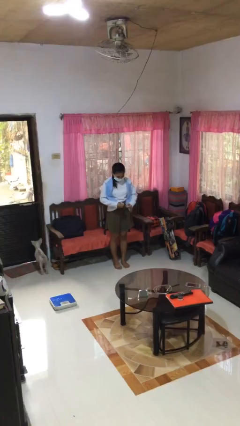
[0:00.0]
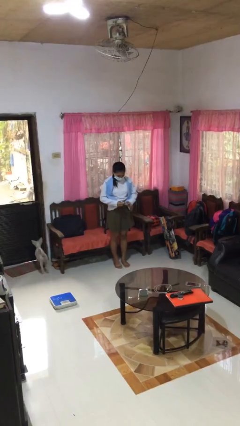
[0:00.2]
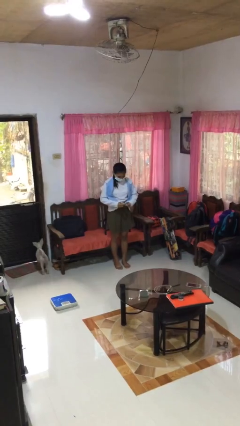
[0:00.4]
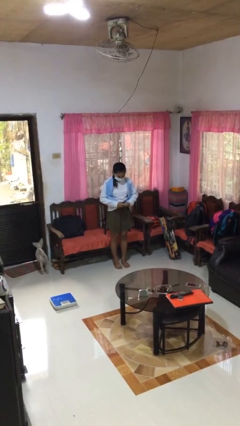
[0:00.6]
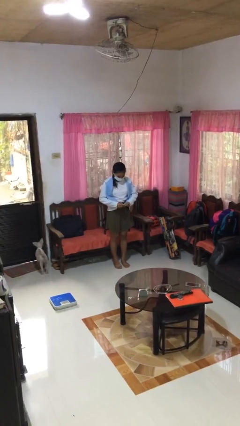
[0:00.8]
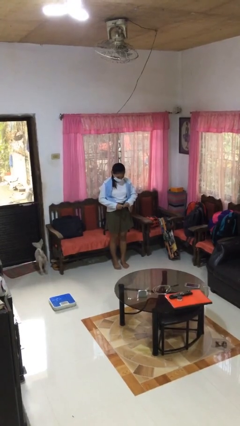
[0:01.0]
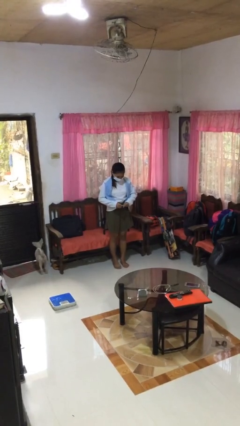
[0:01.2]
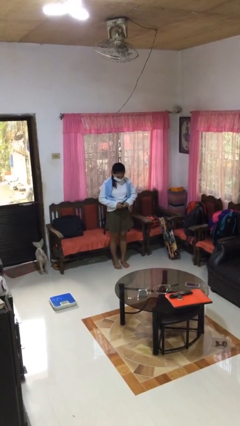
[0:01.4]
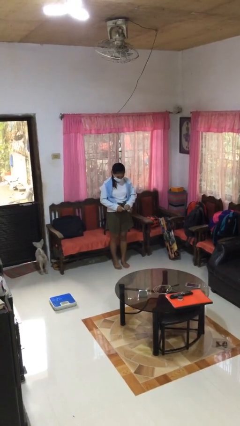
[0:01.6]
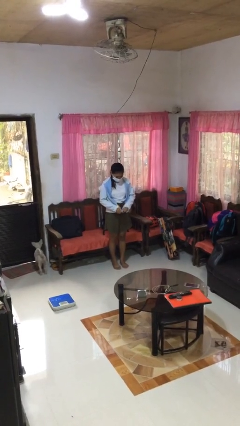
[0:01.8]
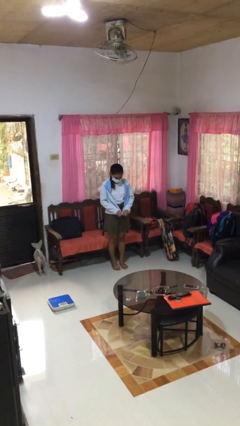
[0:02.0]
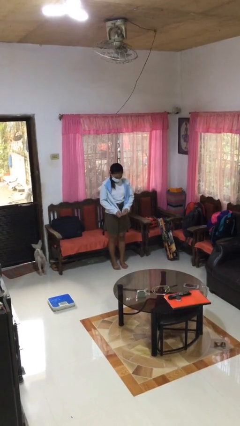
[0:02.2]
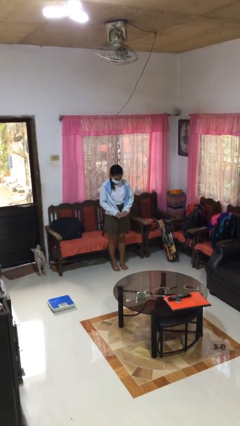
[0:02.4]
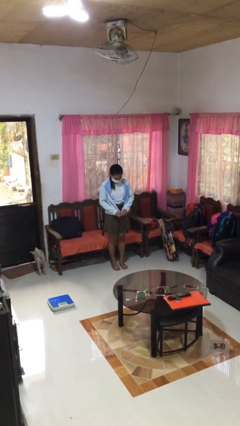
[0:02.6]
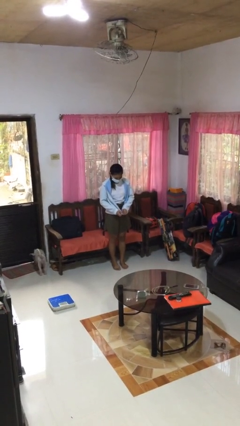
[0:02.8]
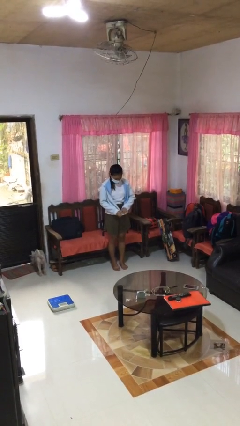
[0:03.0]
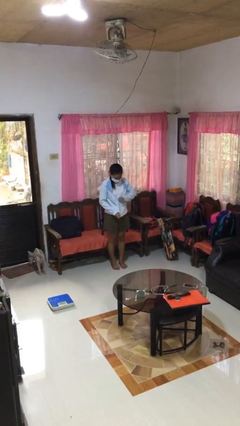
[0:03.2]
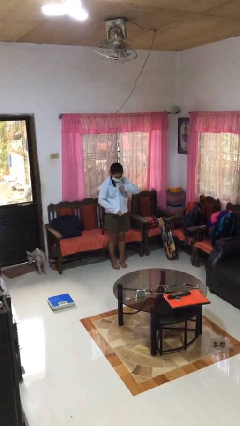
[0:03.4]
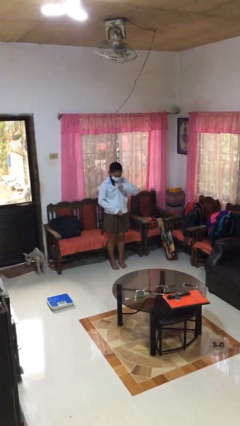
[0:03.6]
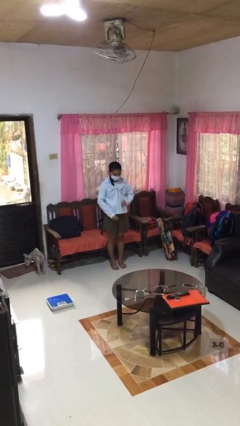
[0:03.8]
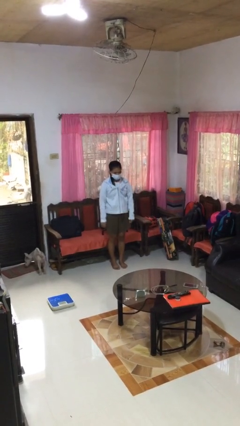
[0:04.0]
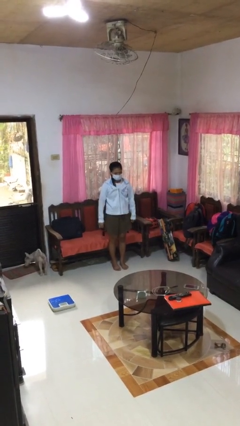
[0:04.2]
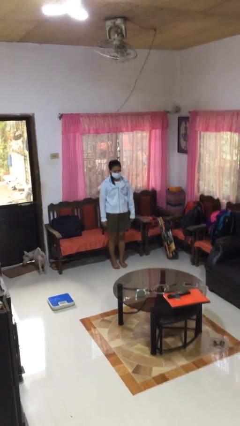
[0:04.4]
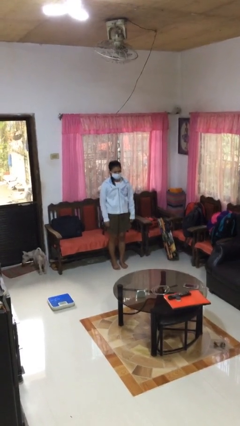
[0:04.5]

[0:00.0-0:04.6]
person zips up jacket

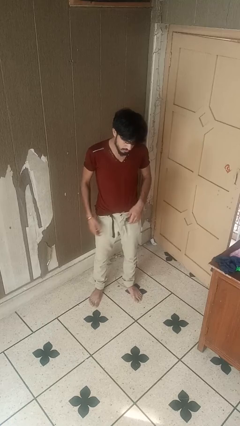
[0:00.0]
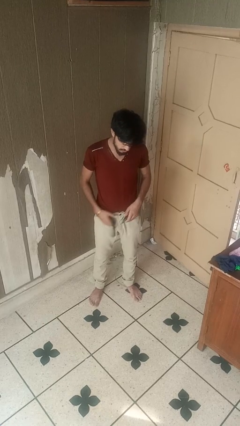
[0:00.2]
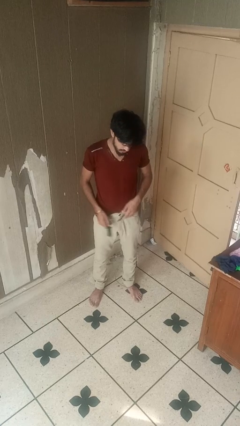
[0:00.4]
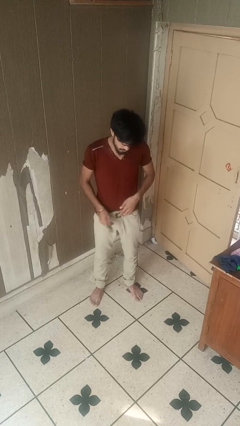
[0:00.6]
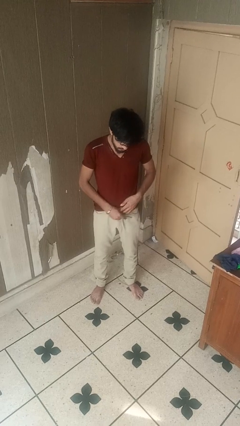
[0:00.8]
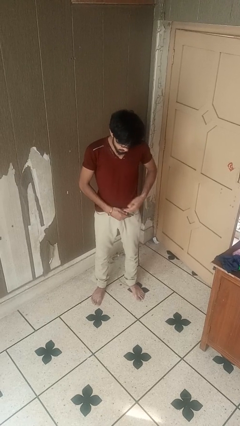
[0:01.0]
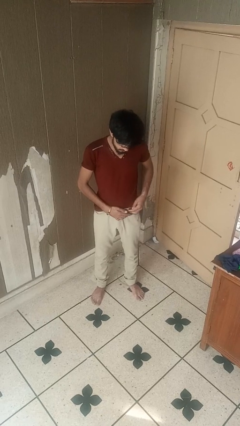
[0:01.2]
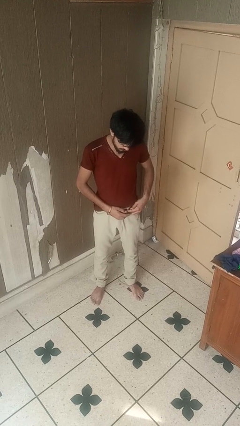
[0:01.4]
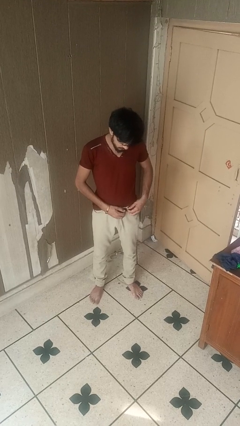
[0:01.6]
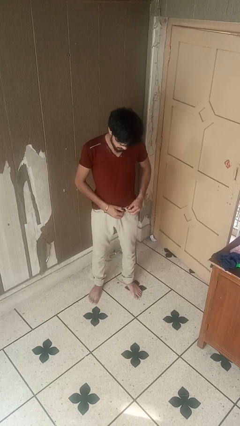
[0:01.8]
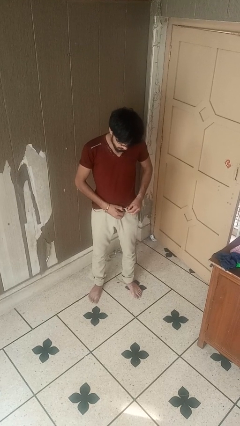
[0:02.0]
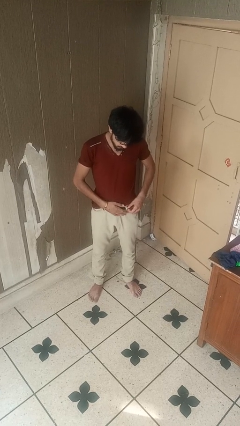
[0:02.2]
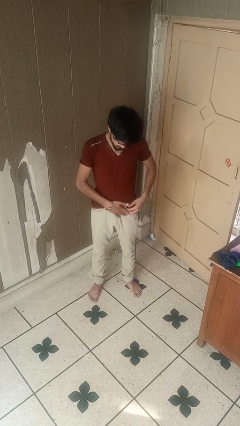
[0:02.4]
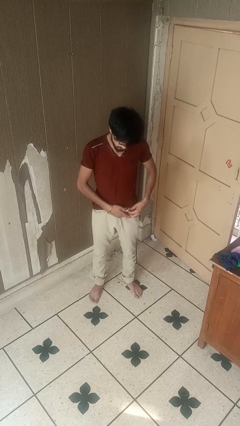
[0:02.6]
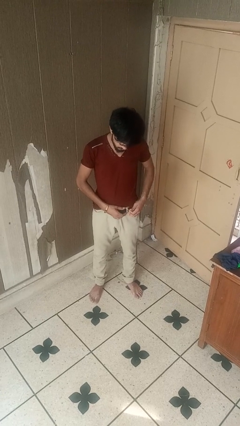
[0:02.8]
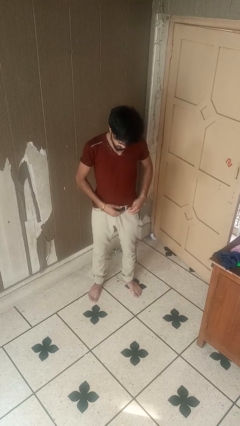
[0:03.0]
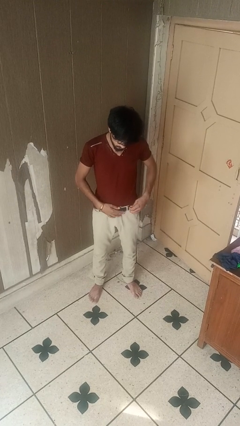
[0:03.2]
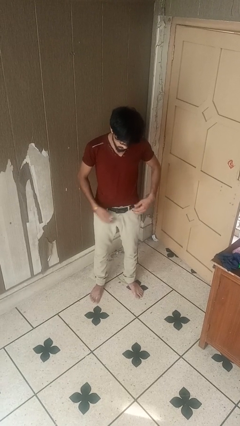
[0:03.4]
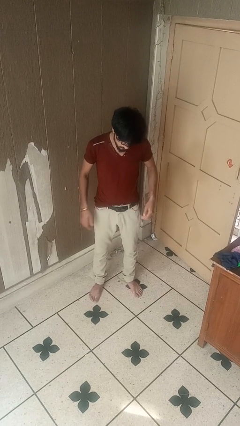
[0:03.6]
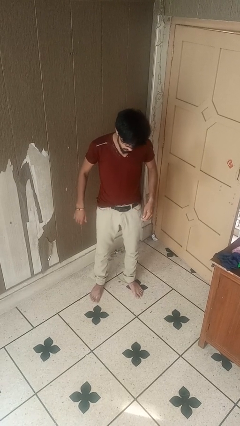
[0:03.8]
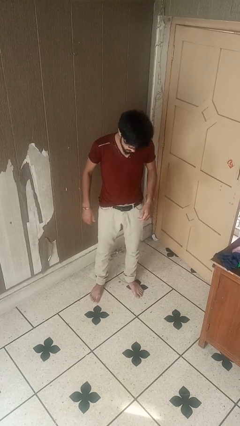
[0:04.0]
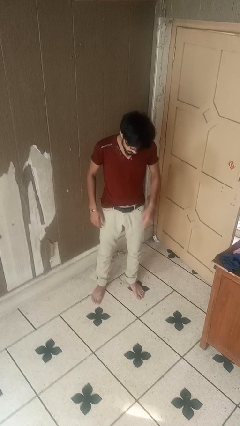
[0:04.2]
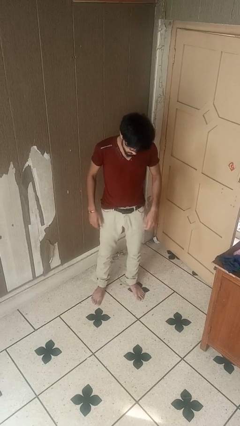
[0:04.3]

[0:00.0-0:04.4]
person puts on belt

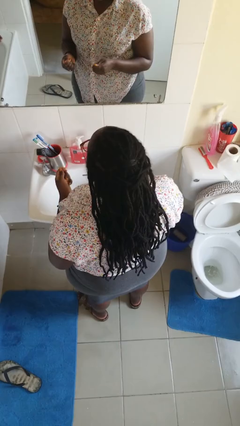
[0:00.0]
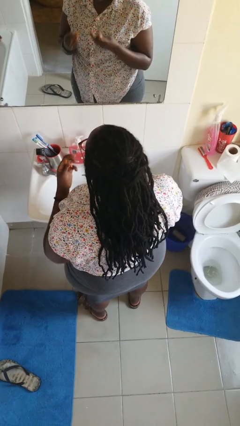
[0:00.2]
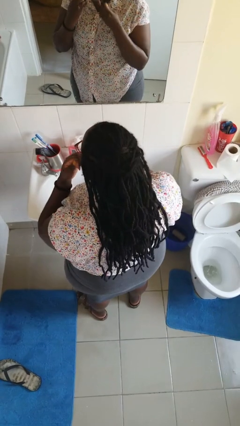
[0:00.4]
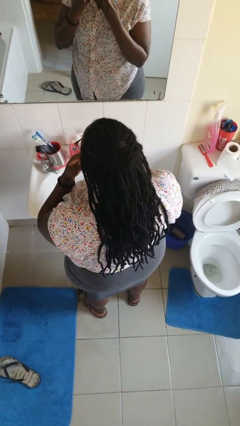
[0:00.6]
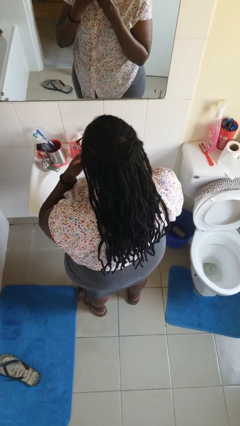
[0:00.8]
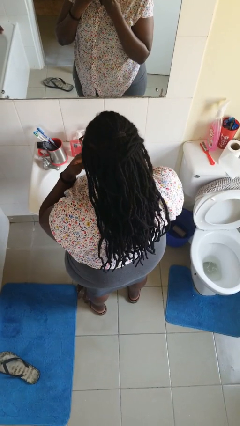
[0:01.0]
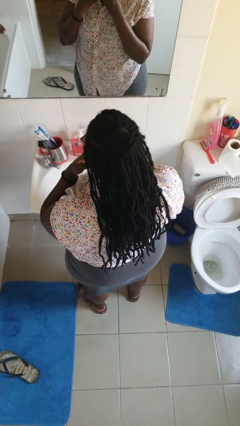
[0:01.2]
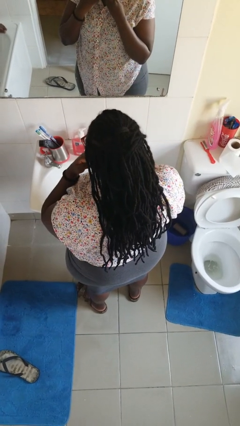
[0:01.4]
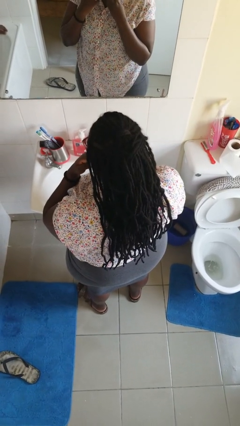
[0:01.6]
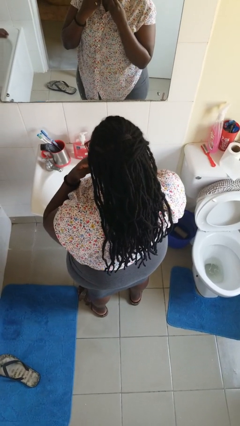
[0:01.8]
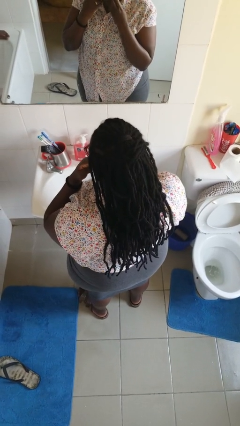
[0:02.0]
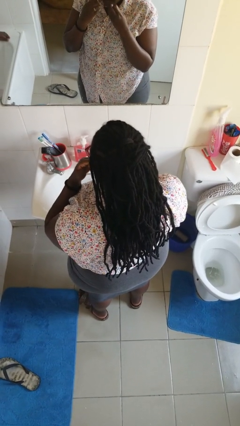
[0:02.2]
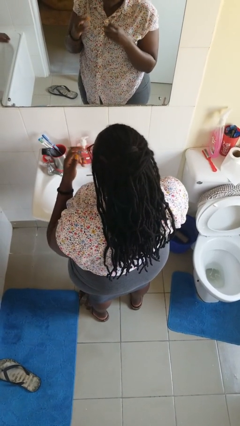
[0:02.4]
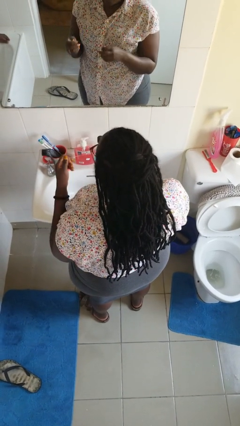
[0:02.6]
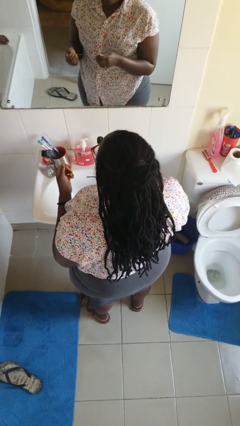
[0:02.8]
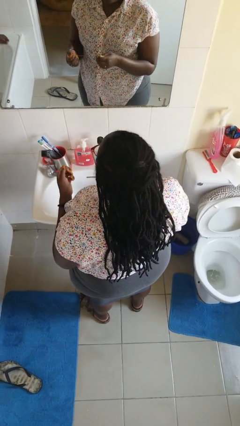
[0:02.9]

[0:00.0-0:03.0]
person flosses

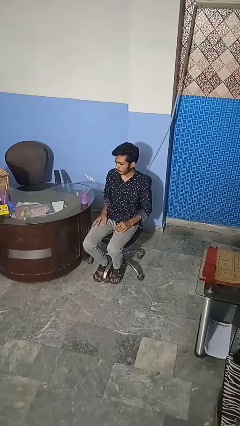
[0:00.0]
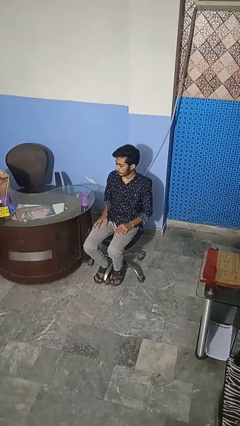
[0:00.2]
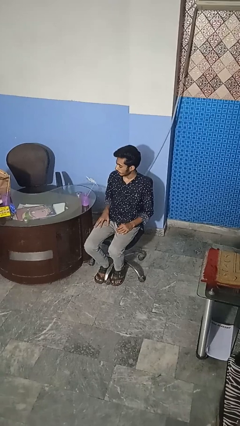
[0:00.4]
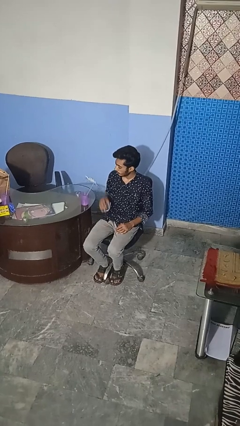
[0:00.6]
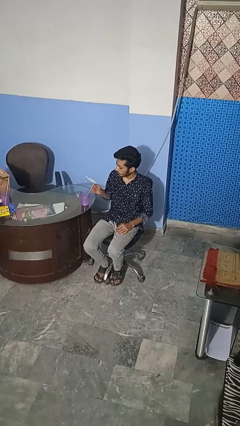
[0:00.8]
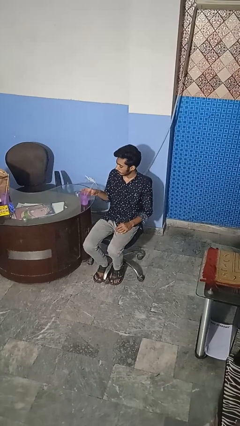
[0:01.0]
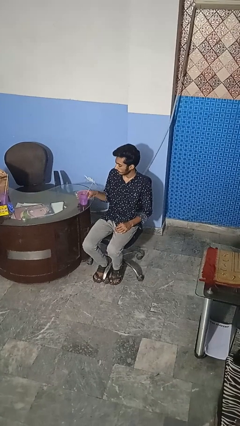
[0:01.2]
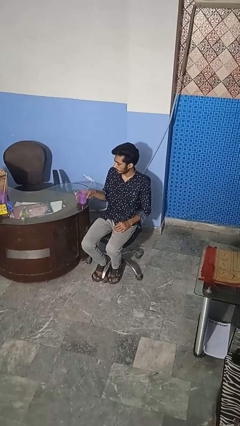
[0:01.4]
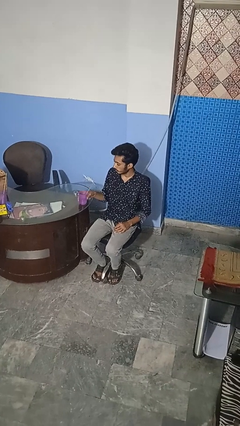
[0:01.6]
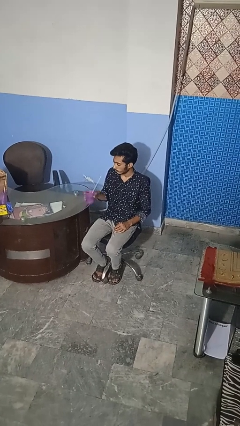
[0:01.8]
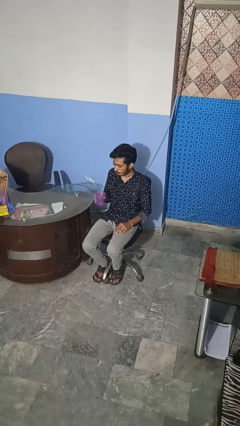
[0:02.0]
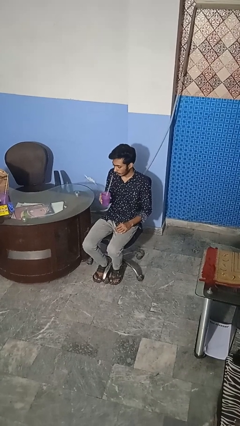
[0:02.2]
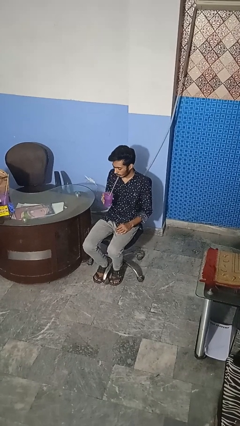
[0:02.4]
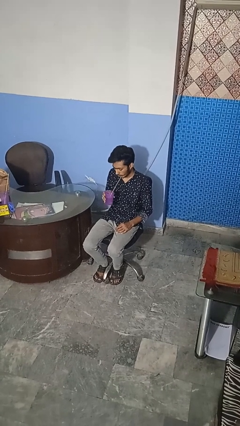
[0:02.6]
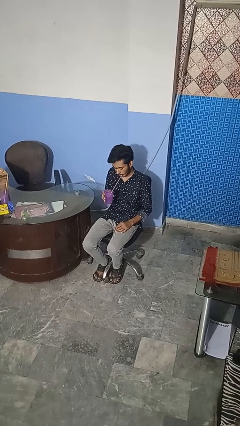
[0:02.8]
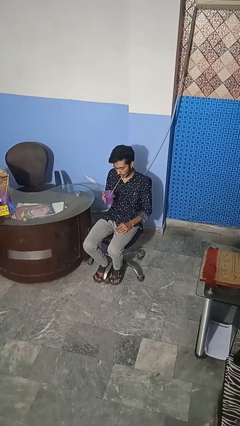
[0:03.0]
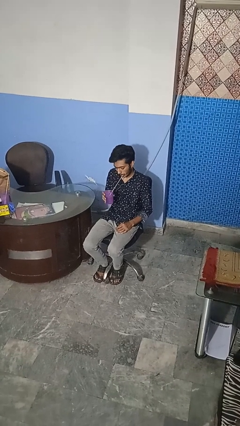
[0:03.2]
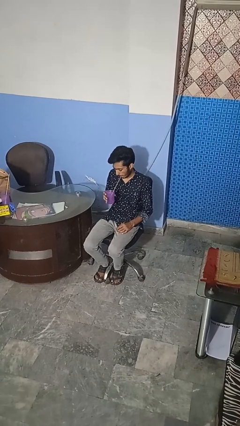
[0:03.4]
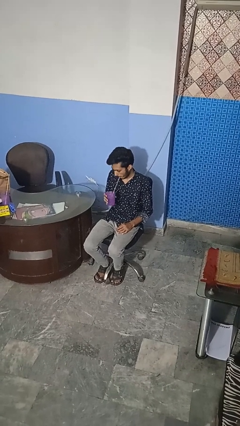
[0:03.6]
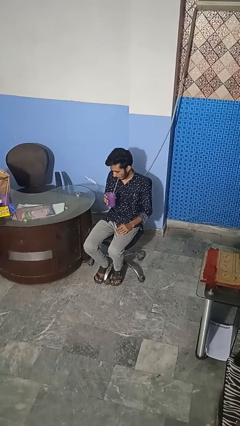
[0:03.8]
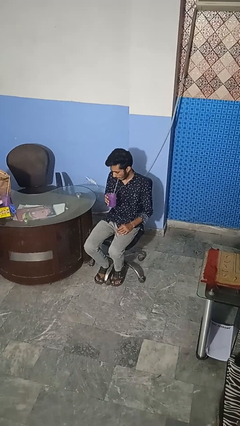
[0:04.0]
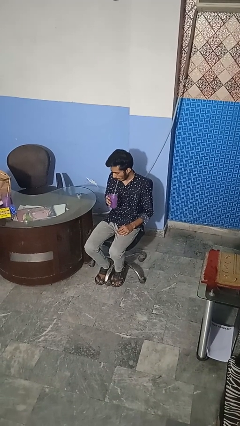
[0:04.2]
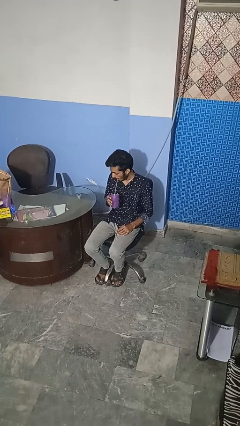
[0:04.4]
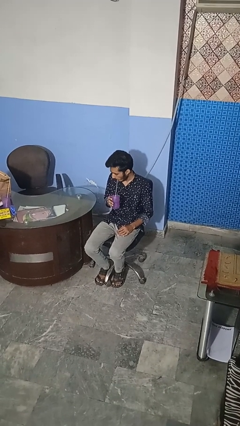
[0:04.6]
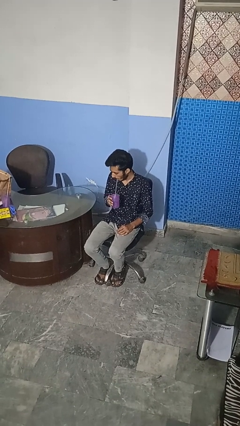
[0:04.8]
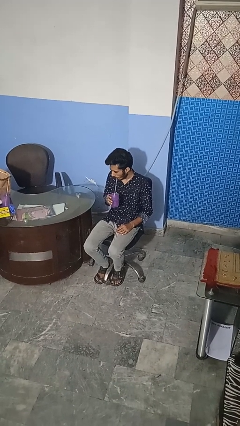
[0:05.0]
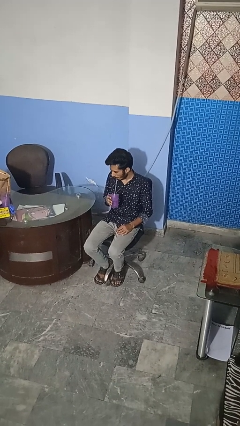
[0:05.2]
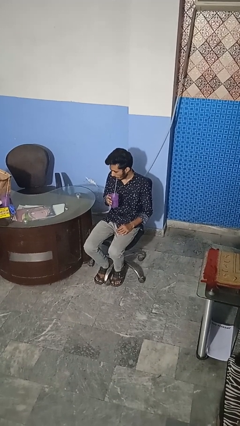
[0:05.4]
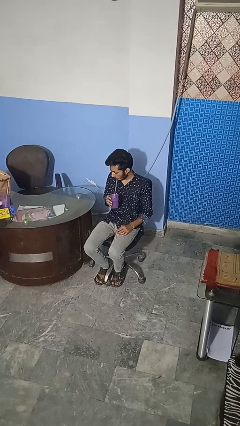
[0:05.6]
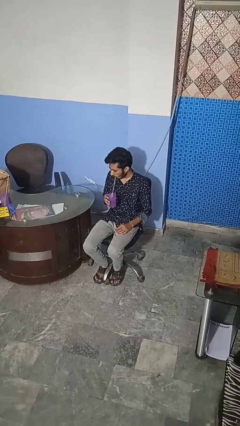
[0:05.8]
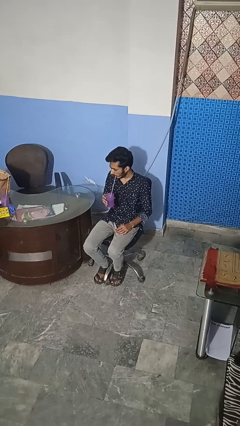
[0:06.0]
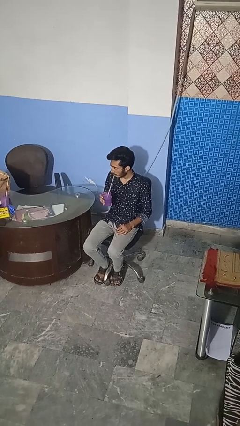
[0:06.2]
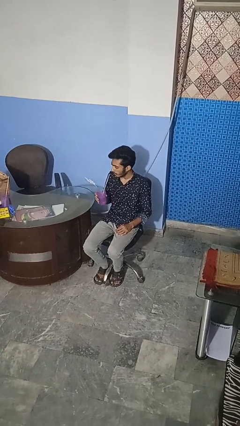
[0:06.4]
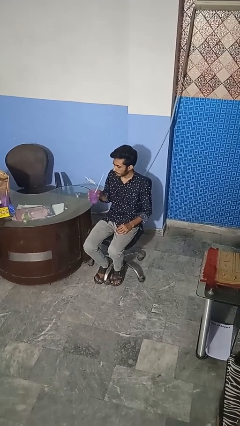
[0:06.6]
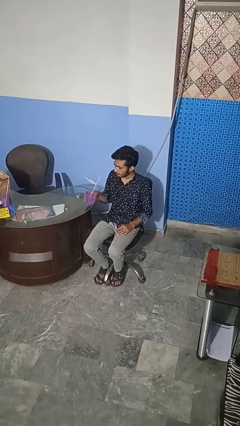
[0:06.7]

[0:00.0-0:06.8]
person drinks from straw
